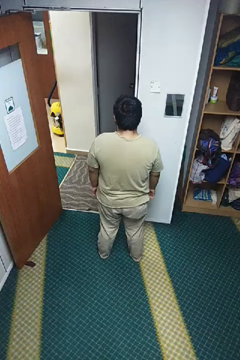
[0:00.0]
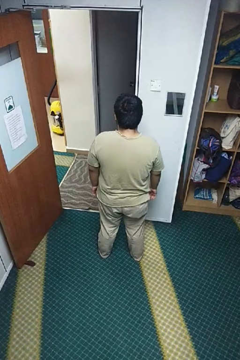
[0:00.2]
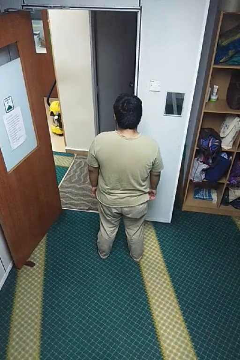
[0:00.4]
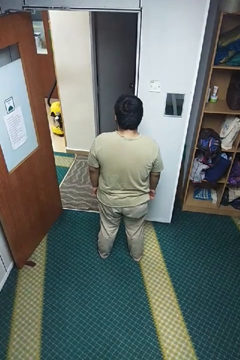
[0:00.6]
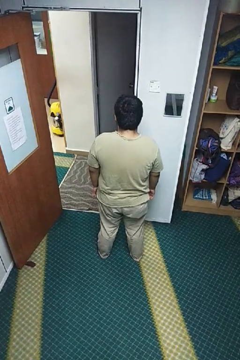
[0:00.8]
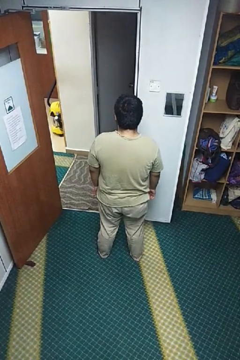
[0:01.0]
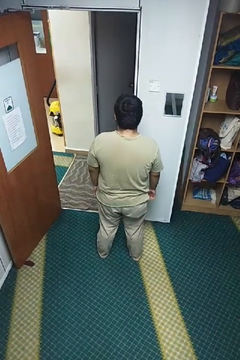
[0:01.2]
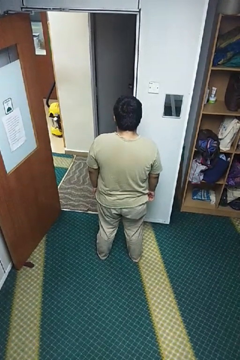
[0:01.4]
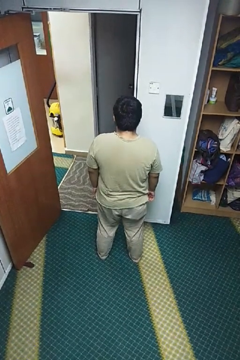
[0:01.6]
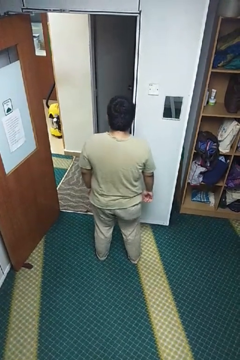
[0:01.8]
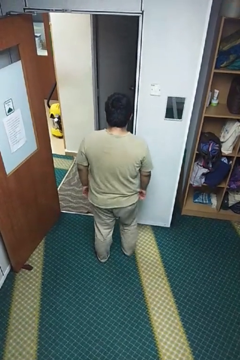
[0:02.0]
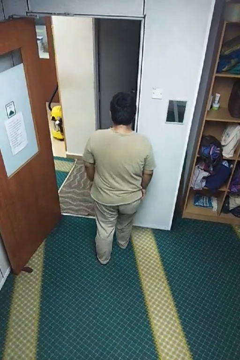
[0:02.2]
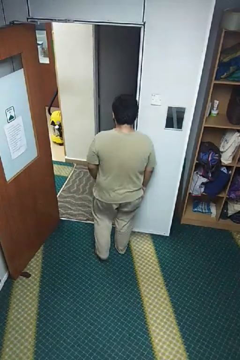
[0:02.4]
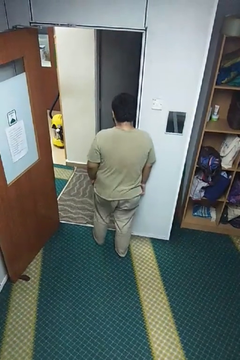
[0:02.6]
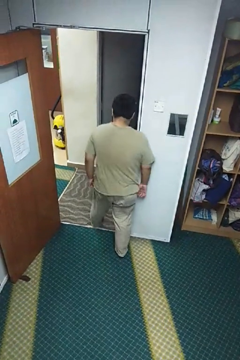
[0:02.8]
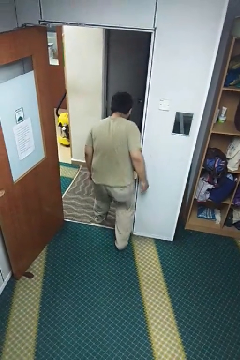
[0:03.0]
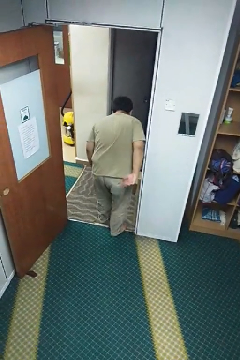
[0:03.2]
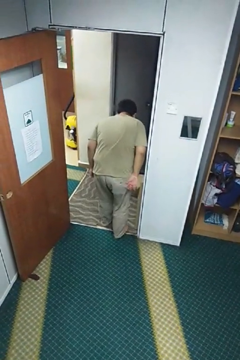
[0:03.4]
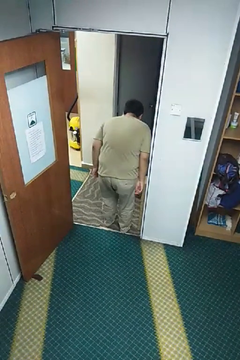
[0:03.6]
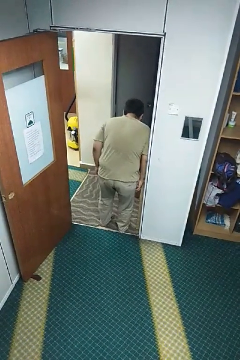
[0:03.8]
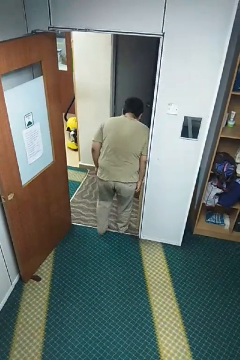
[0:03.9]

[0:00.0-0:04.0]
person bumps into wall

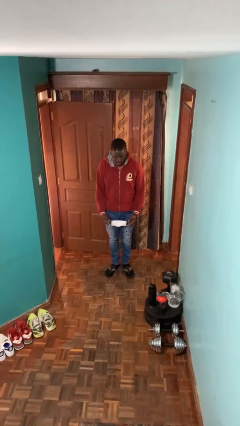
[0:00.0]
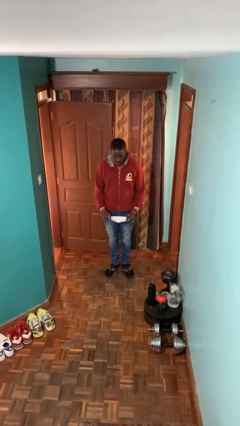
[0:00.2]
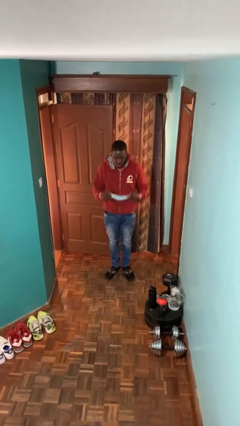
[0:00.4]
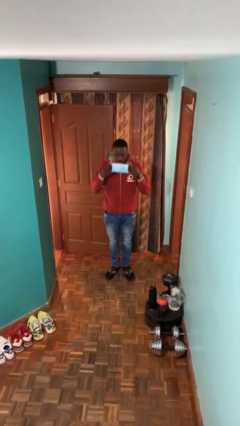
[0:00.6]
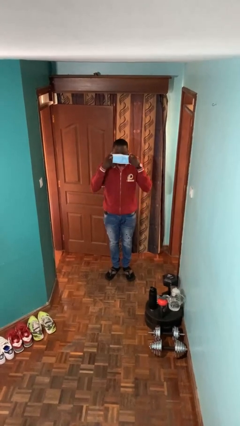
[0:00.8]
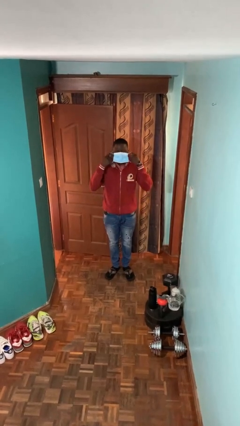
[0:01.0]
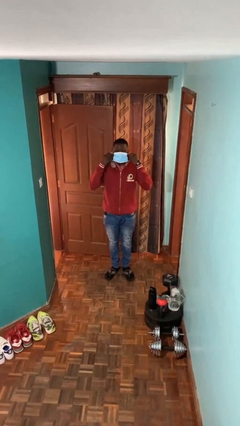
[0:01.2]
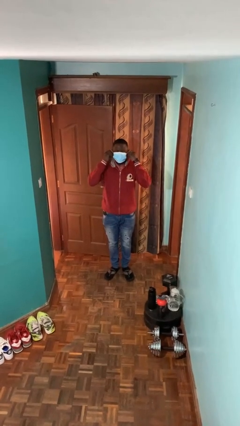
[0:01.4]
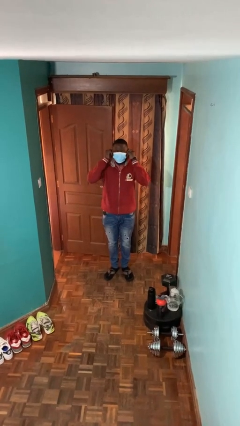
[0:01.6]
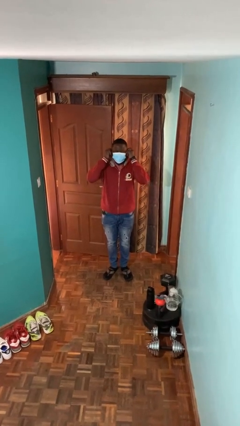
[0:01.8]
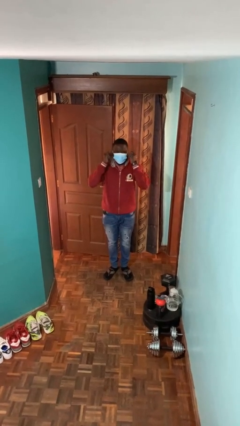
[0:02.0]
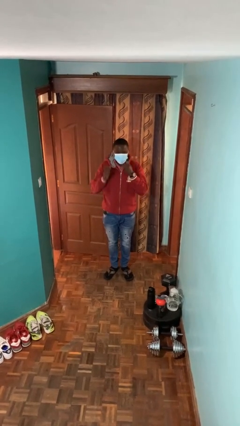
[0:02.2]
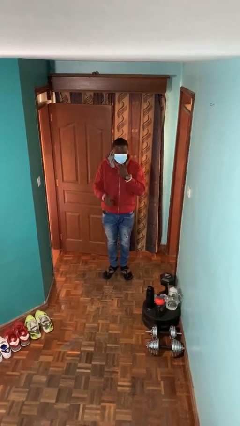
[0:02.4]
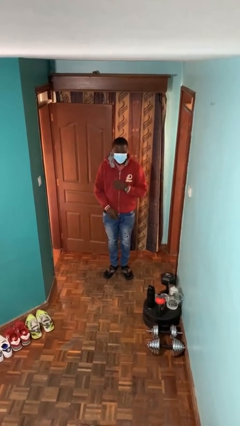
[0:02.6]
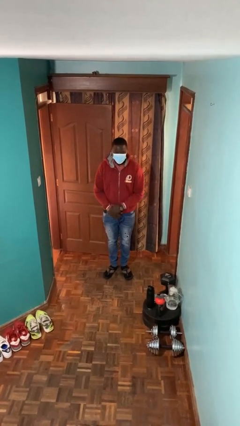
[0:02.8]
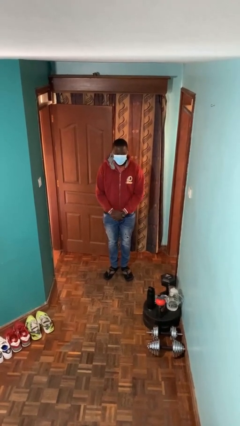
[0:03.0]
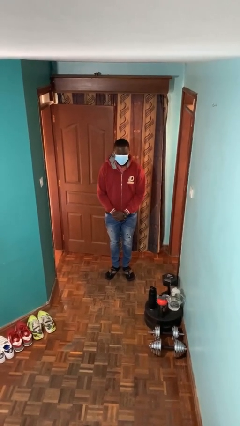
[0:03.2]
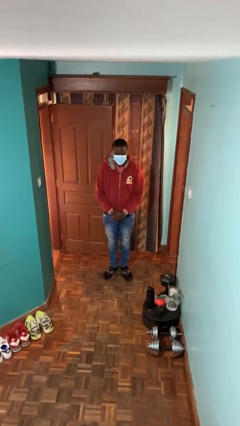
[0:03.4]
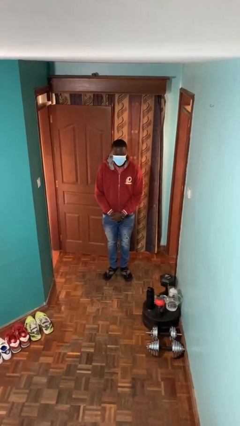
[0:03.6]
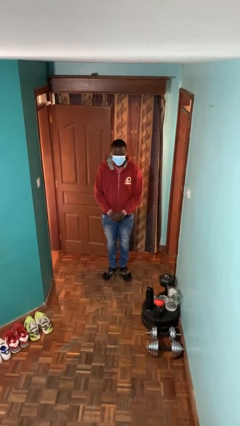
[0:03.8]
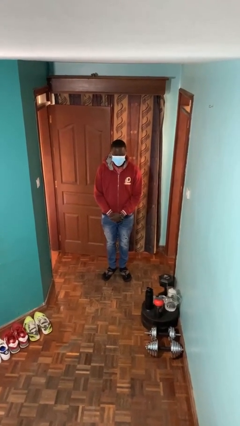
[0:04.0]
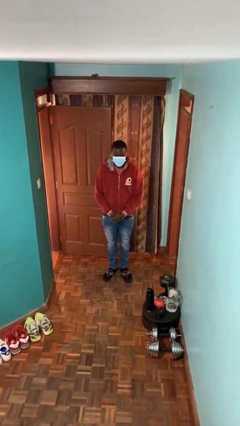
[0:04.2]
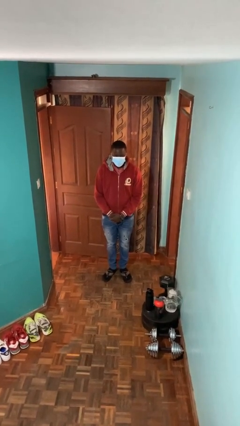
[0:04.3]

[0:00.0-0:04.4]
person puts on facemask

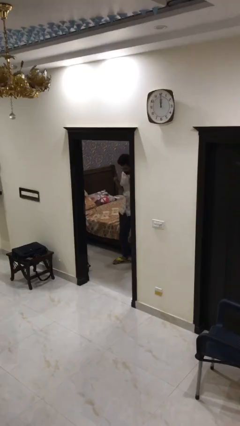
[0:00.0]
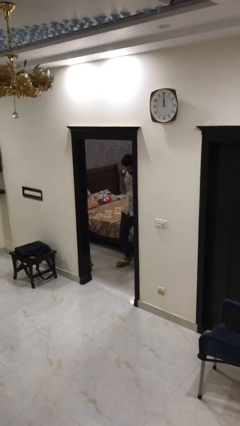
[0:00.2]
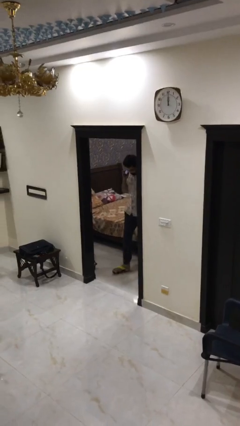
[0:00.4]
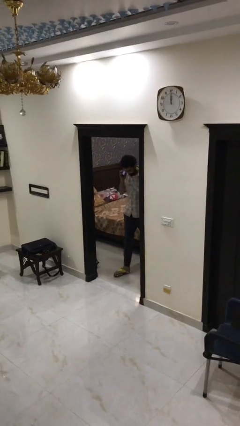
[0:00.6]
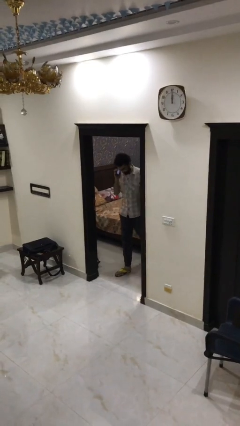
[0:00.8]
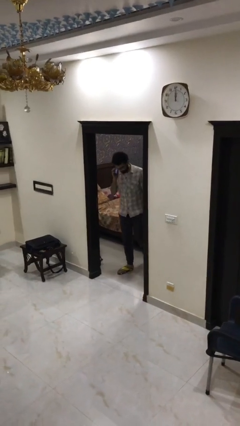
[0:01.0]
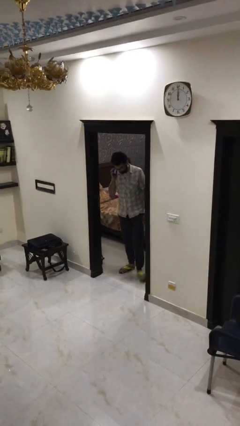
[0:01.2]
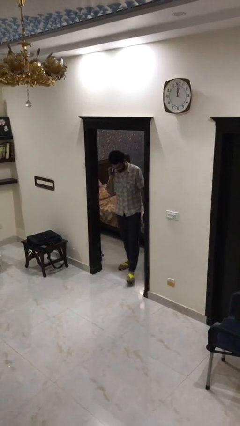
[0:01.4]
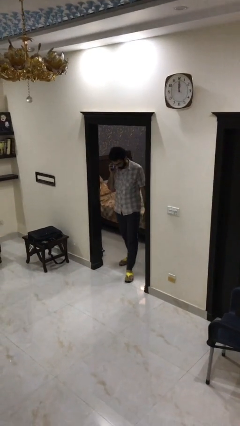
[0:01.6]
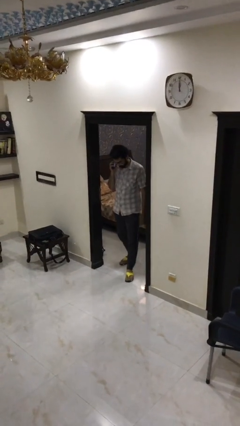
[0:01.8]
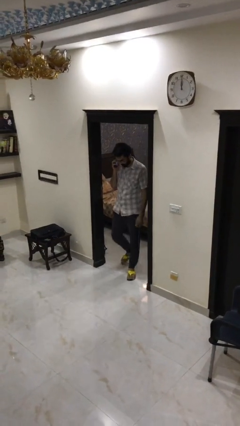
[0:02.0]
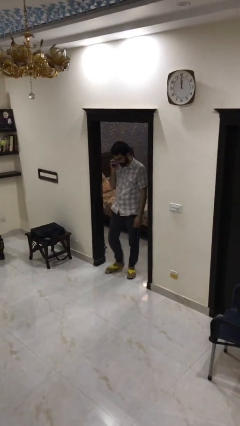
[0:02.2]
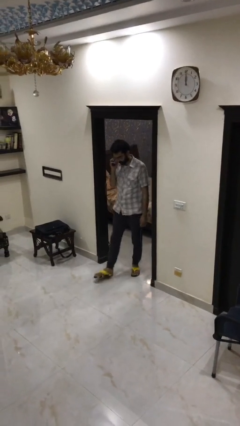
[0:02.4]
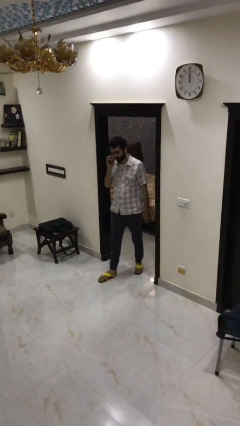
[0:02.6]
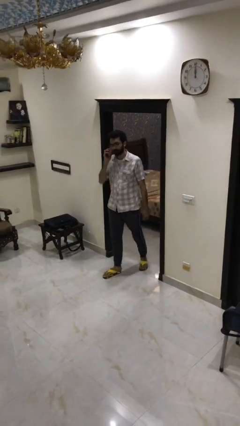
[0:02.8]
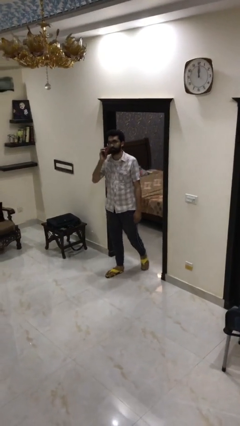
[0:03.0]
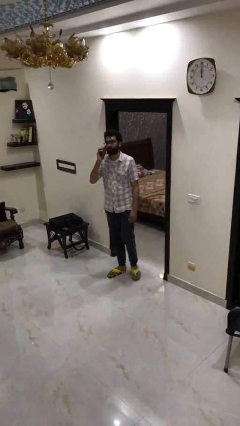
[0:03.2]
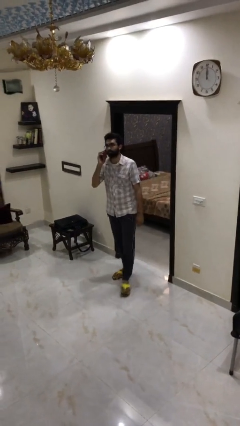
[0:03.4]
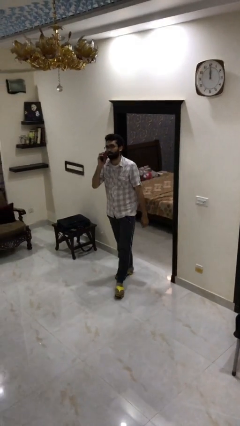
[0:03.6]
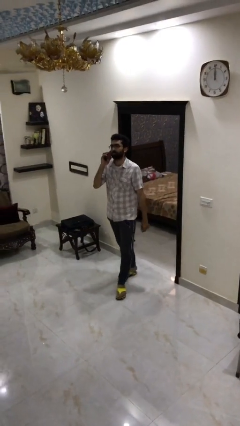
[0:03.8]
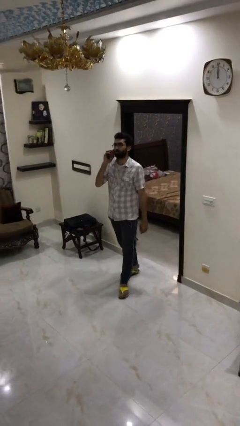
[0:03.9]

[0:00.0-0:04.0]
person enters scene through structure

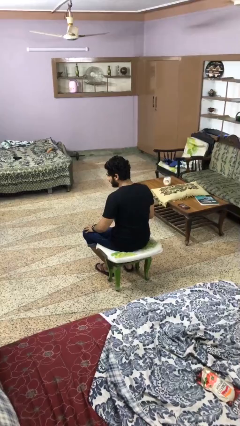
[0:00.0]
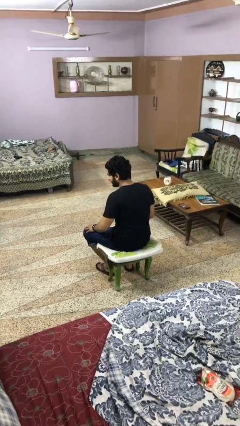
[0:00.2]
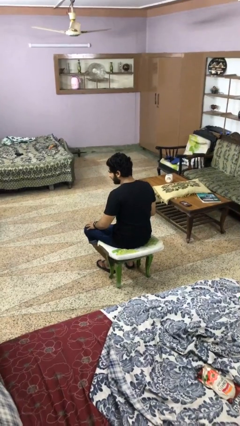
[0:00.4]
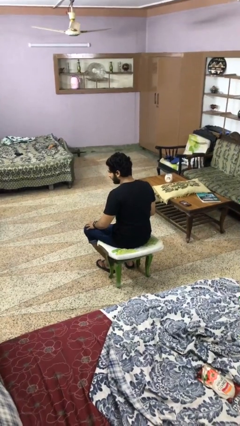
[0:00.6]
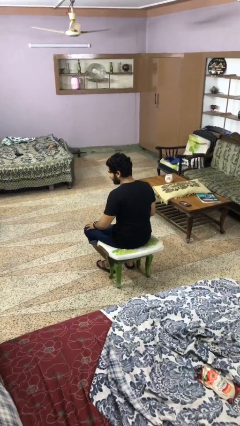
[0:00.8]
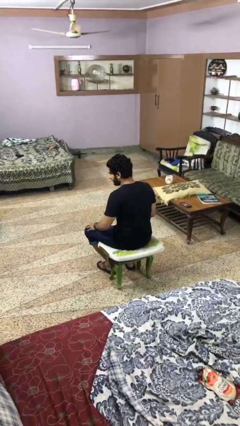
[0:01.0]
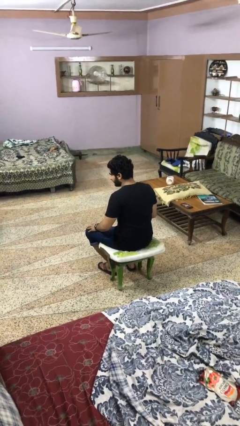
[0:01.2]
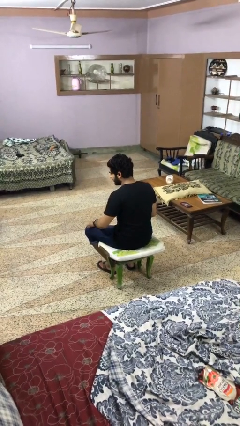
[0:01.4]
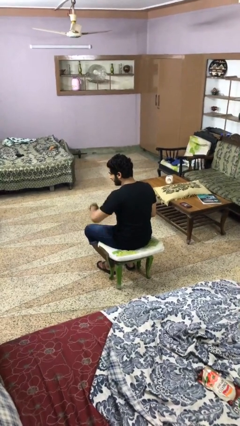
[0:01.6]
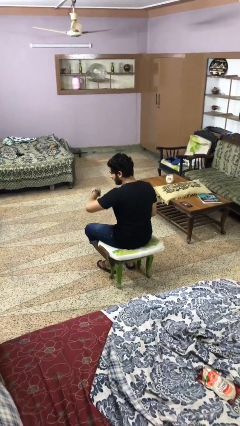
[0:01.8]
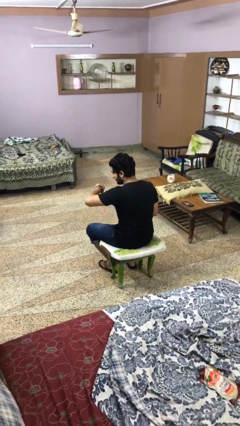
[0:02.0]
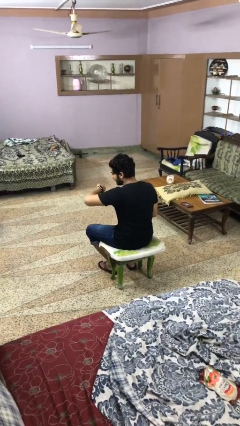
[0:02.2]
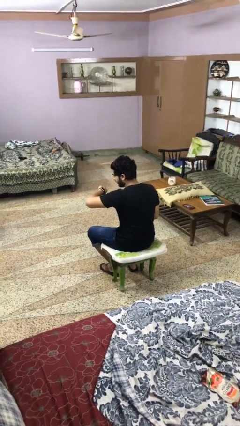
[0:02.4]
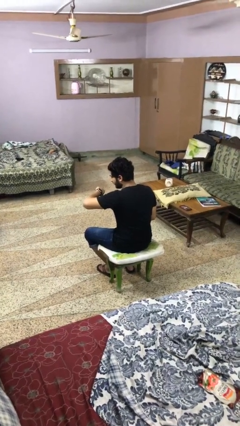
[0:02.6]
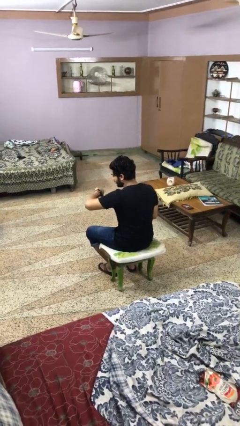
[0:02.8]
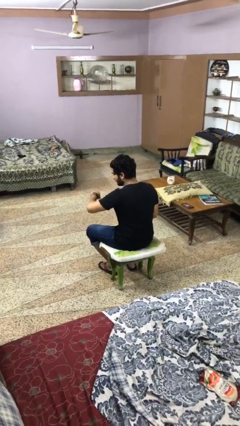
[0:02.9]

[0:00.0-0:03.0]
person looks at wristwatch

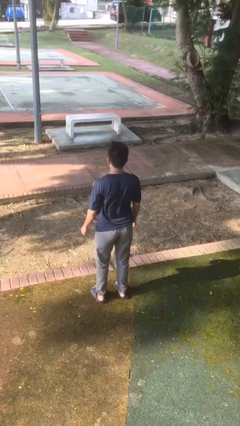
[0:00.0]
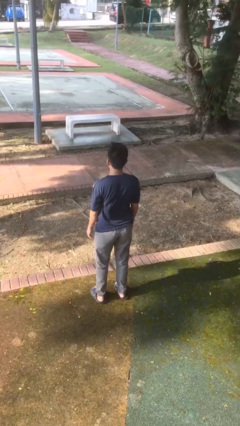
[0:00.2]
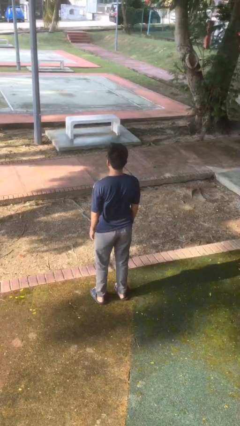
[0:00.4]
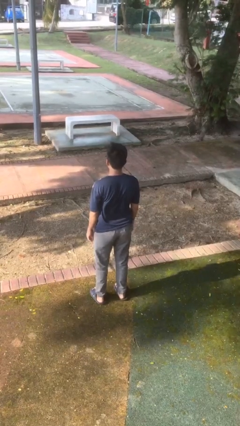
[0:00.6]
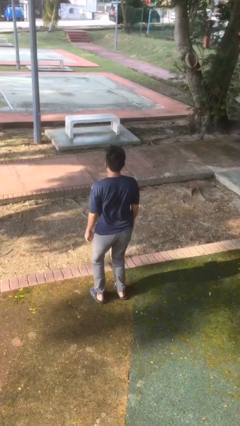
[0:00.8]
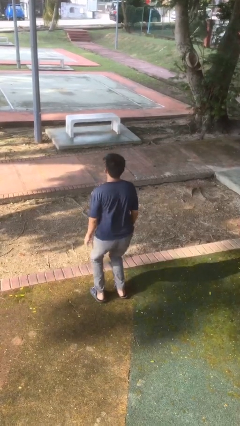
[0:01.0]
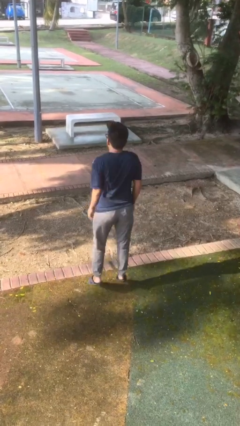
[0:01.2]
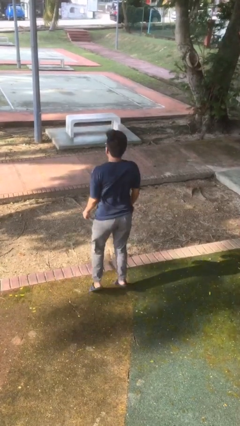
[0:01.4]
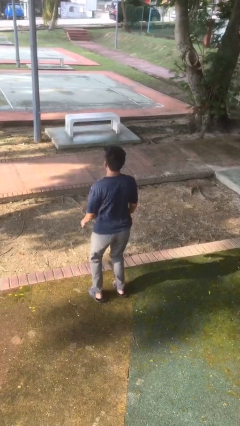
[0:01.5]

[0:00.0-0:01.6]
person jumps

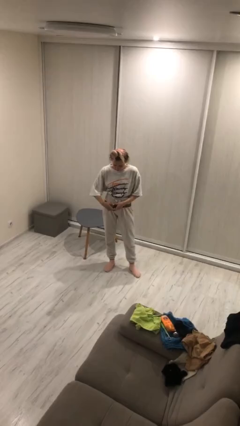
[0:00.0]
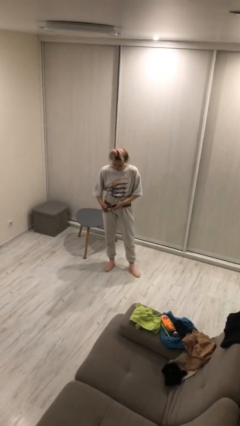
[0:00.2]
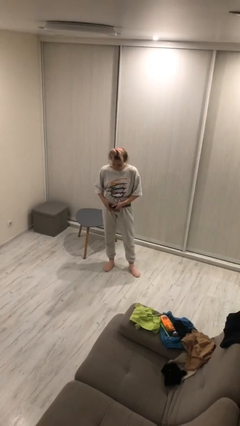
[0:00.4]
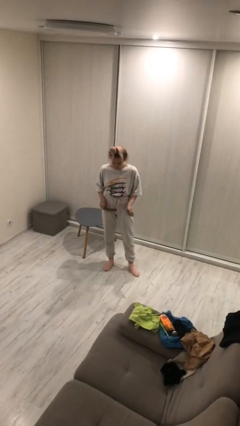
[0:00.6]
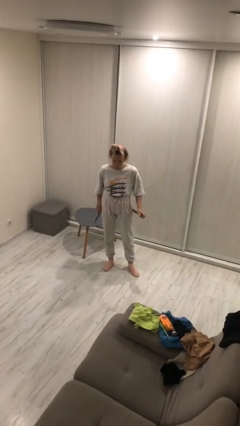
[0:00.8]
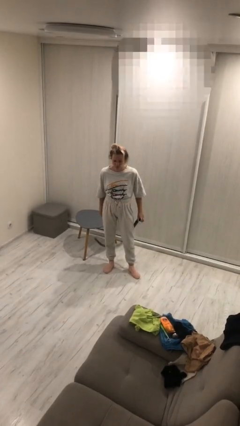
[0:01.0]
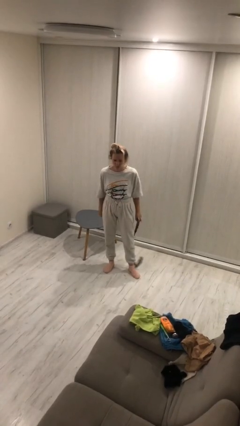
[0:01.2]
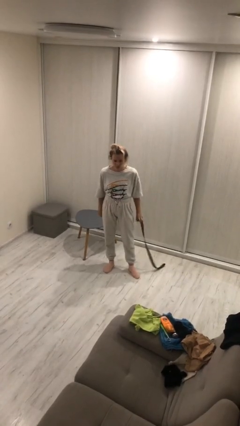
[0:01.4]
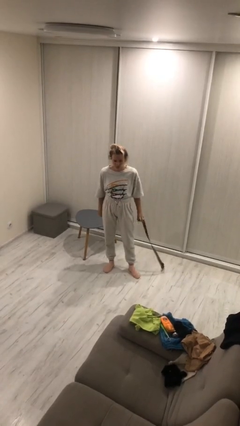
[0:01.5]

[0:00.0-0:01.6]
person takes off belt
